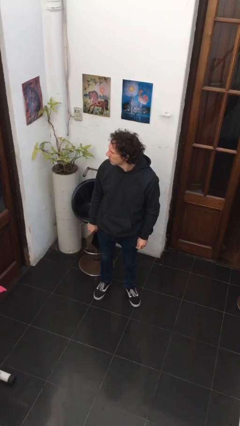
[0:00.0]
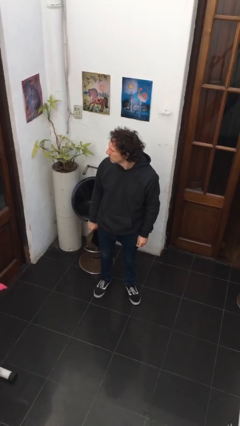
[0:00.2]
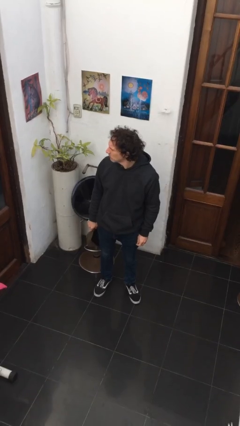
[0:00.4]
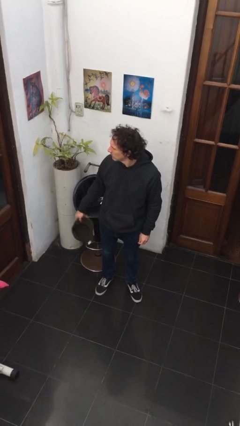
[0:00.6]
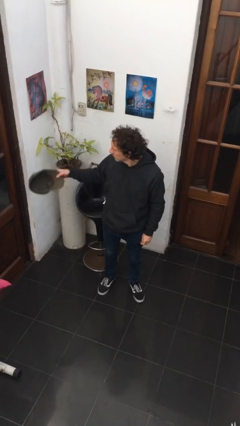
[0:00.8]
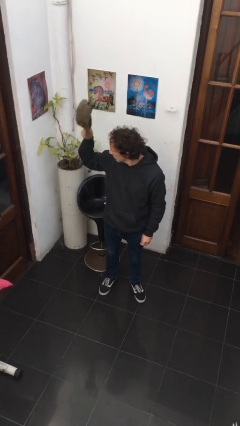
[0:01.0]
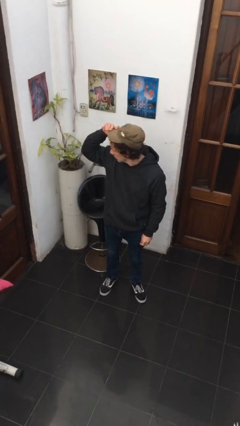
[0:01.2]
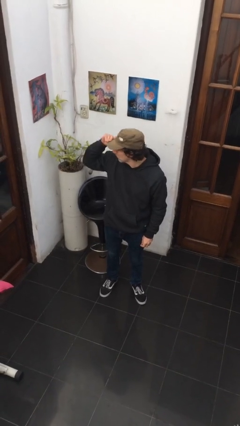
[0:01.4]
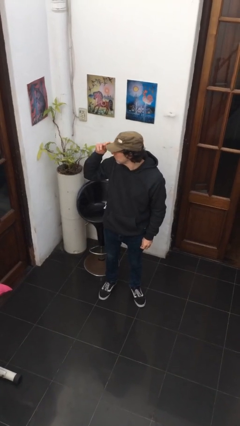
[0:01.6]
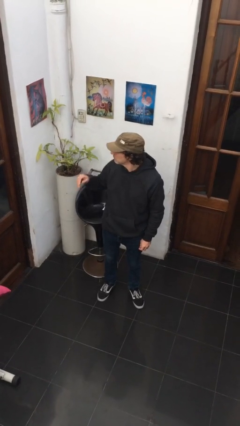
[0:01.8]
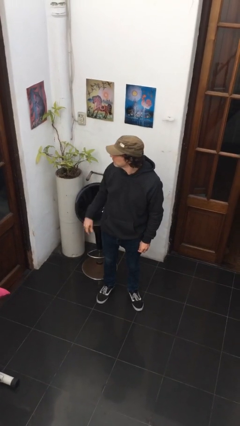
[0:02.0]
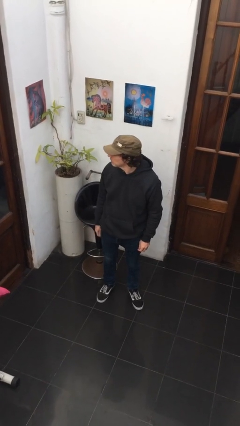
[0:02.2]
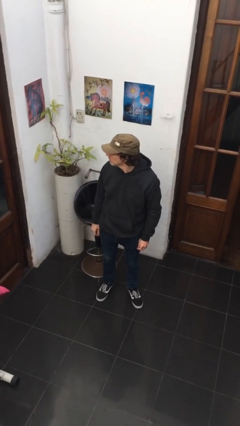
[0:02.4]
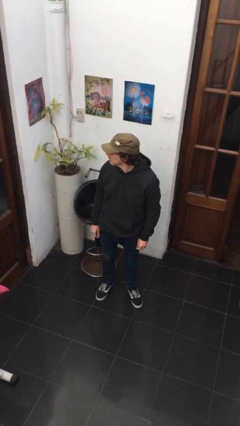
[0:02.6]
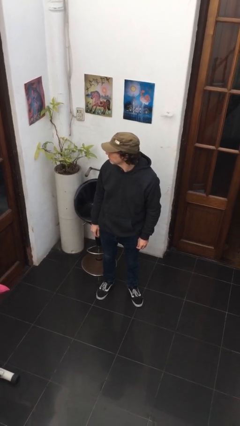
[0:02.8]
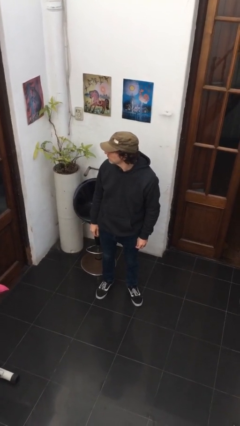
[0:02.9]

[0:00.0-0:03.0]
person puts on hat

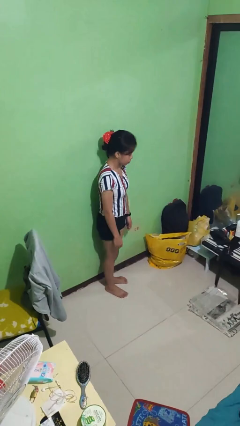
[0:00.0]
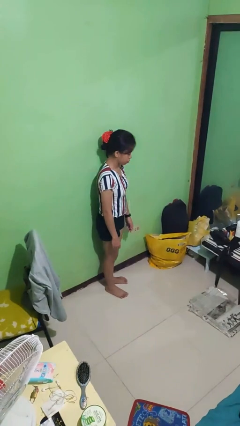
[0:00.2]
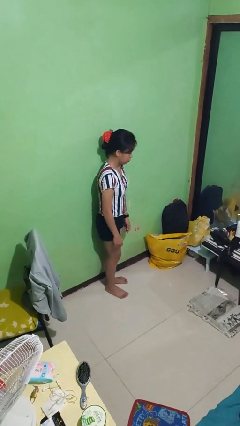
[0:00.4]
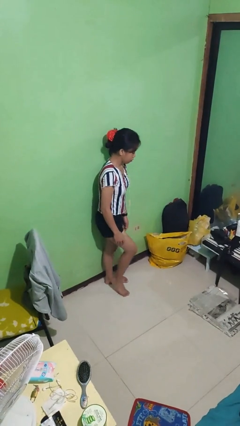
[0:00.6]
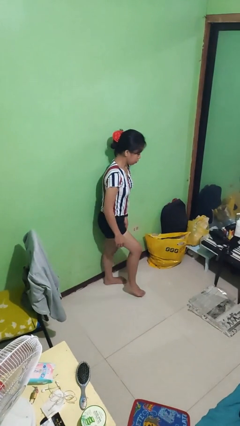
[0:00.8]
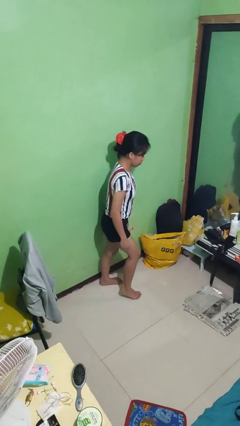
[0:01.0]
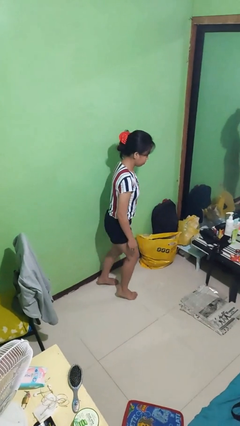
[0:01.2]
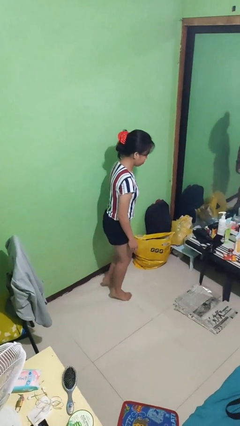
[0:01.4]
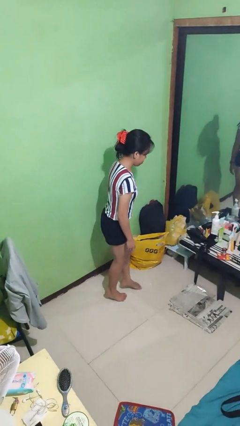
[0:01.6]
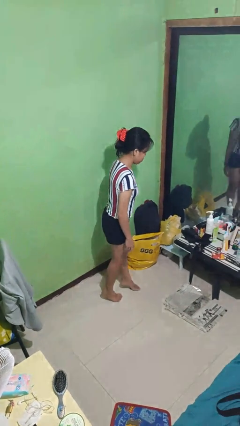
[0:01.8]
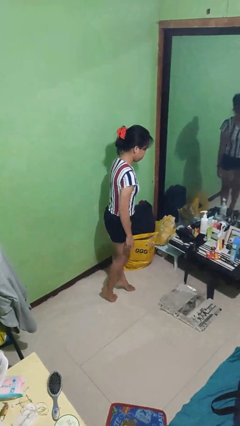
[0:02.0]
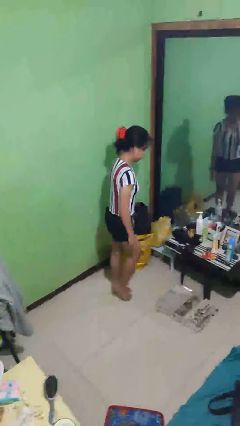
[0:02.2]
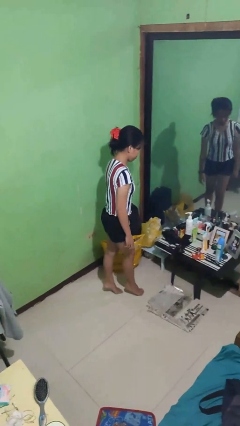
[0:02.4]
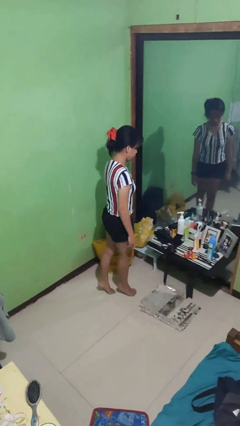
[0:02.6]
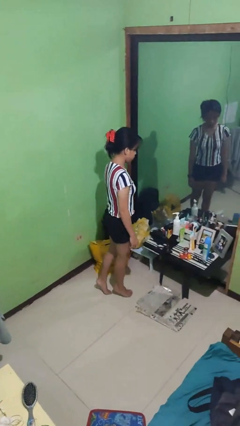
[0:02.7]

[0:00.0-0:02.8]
person walks tiptoe

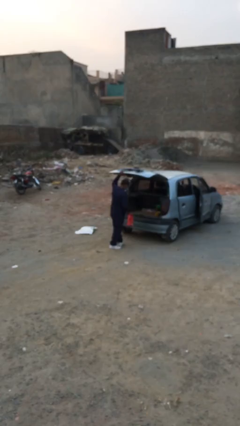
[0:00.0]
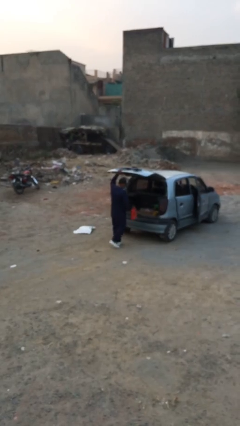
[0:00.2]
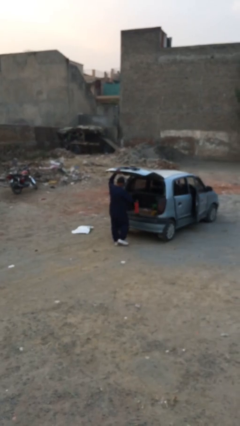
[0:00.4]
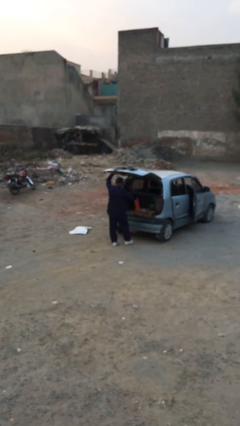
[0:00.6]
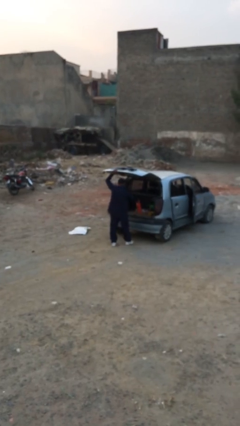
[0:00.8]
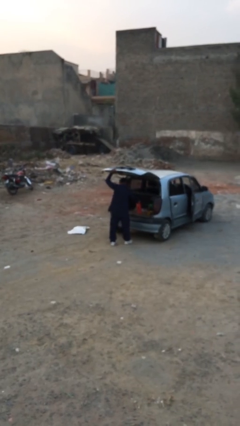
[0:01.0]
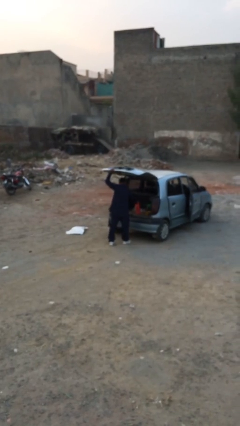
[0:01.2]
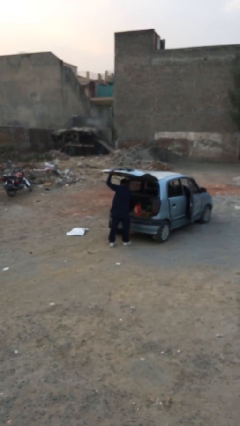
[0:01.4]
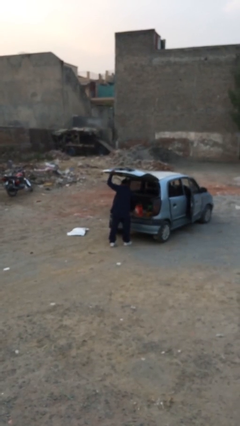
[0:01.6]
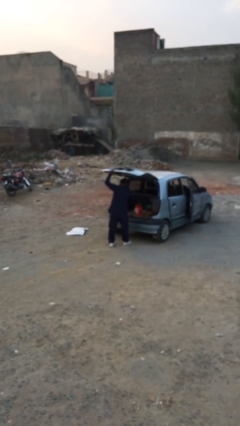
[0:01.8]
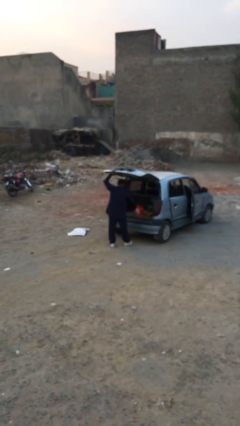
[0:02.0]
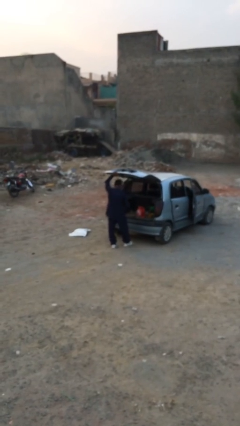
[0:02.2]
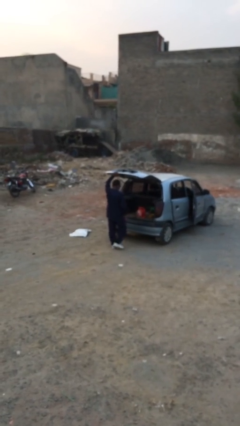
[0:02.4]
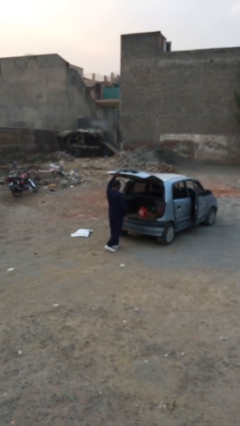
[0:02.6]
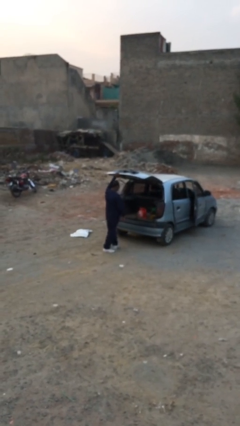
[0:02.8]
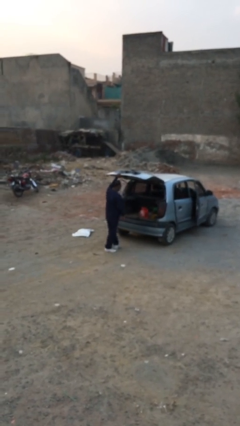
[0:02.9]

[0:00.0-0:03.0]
person loads car

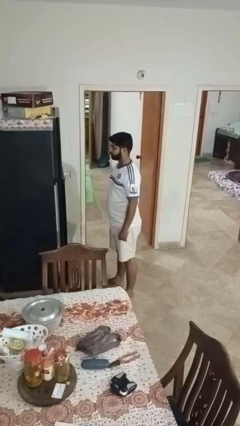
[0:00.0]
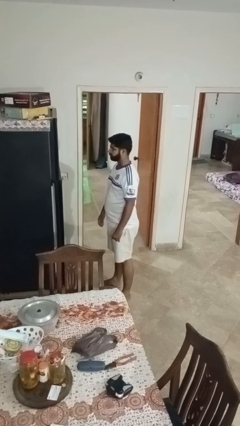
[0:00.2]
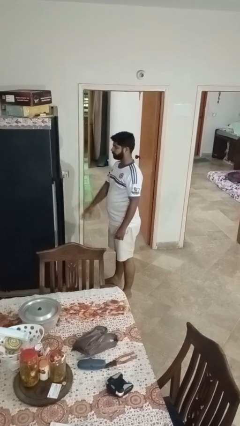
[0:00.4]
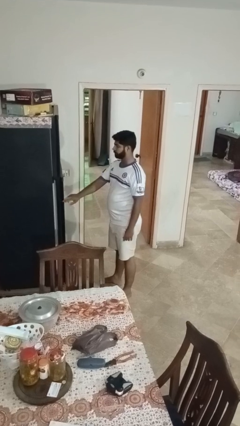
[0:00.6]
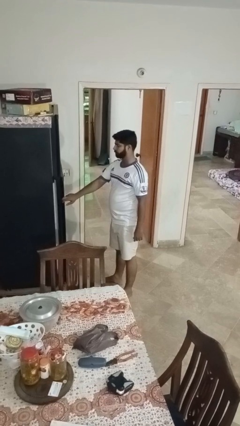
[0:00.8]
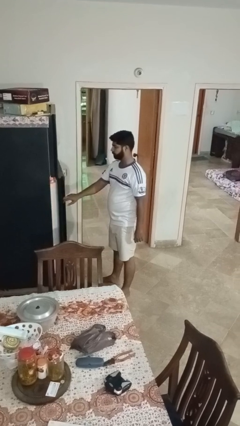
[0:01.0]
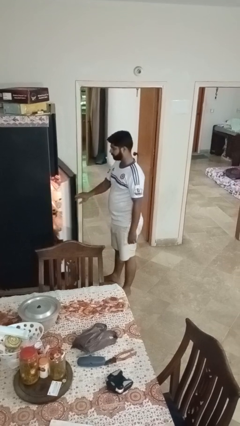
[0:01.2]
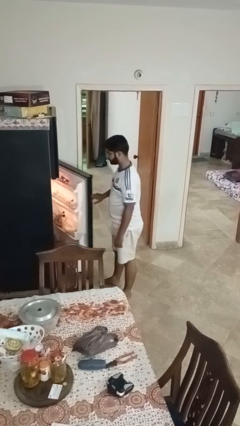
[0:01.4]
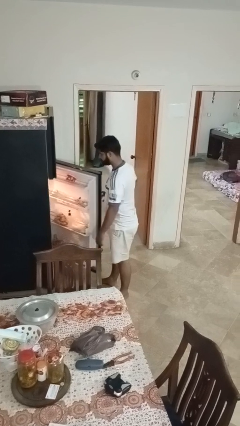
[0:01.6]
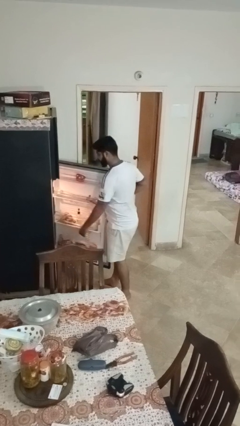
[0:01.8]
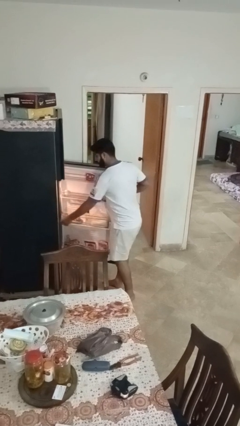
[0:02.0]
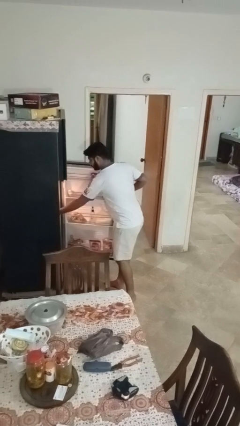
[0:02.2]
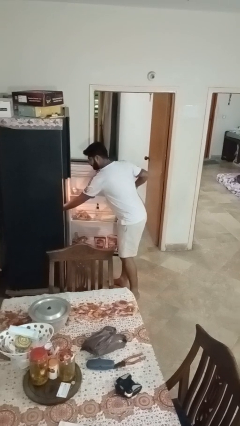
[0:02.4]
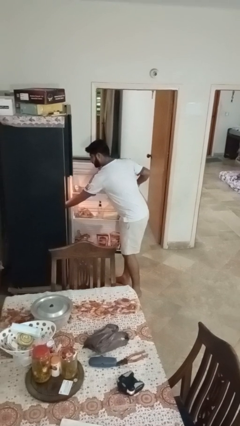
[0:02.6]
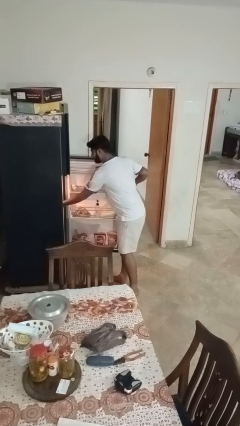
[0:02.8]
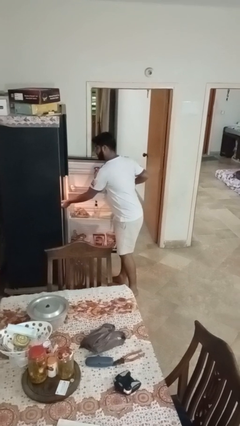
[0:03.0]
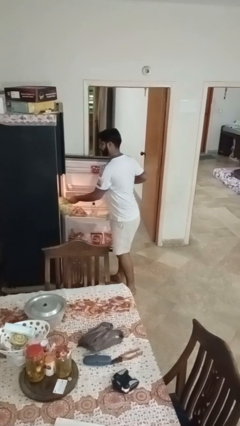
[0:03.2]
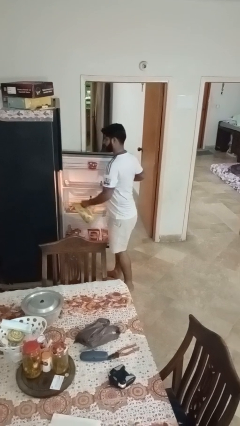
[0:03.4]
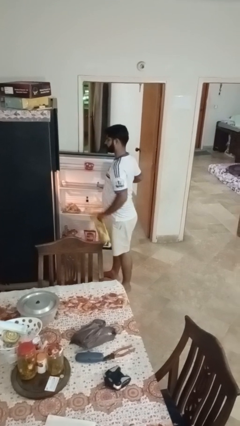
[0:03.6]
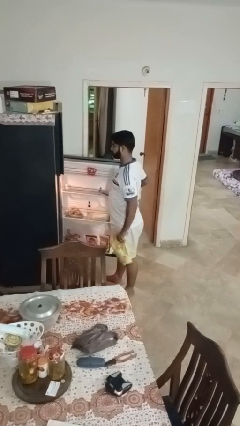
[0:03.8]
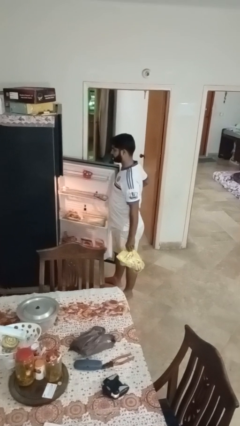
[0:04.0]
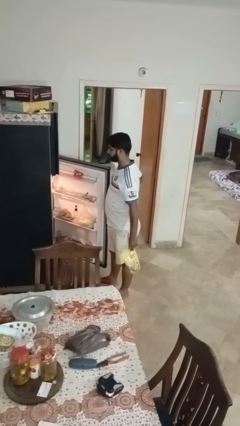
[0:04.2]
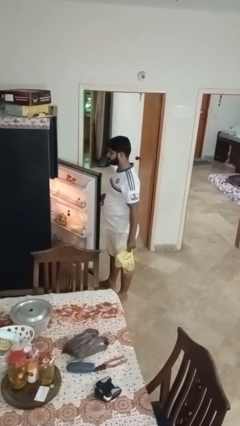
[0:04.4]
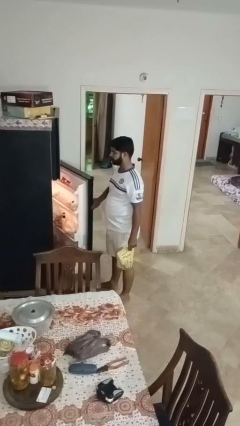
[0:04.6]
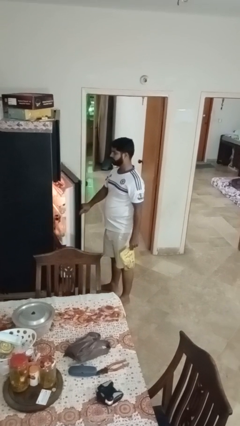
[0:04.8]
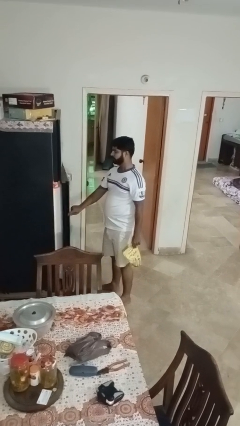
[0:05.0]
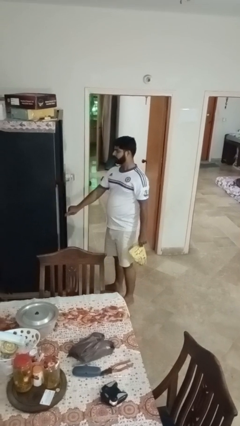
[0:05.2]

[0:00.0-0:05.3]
person takes object from refrigerator

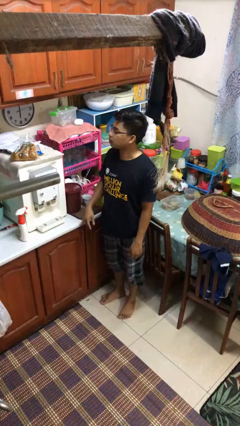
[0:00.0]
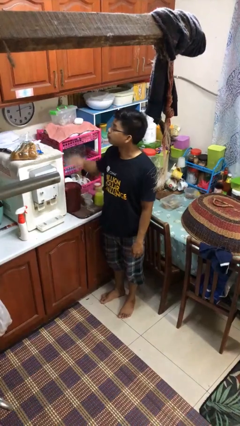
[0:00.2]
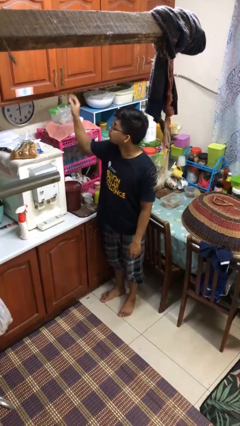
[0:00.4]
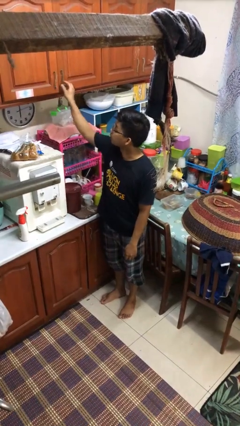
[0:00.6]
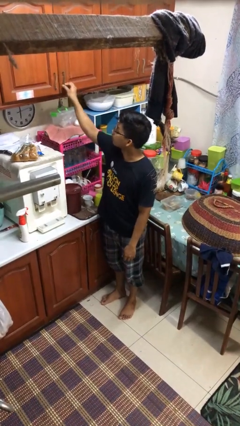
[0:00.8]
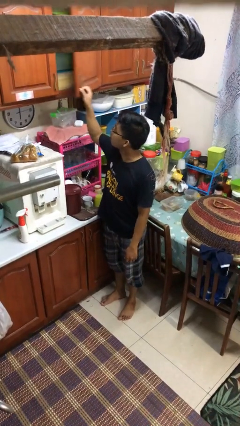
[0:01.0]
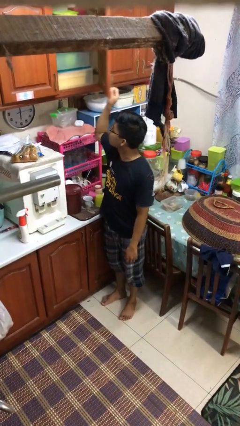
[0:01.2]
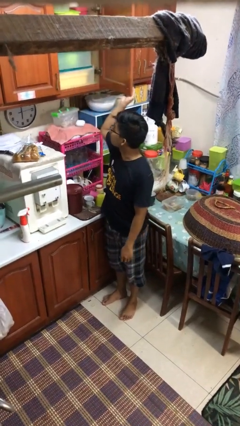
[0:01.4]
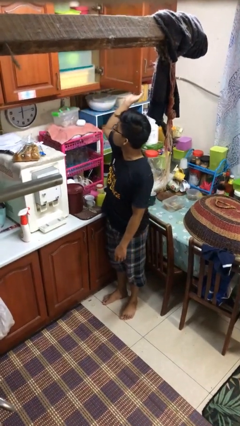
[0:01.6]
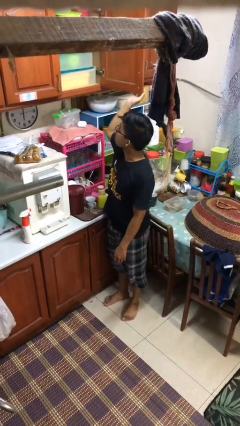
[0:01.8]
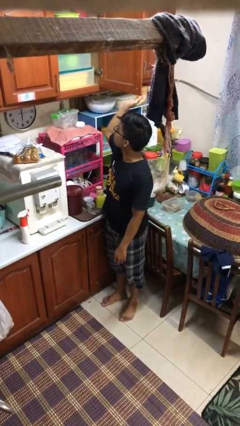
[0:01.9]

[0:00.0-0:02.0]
person opens kitchen drawer

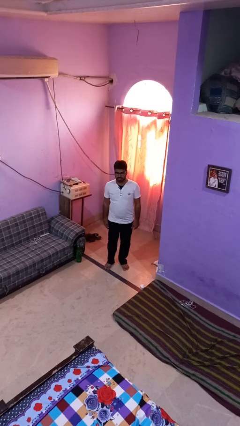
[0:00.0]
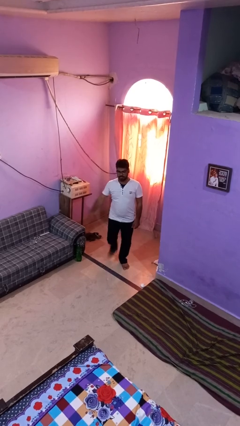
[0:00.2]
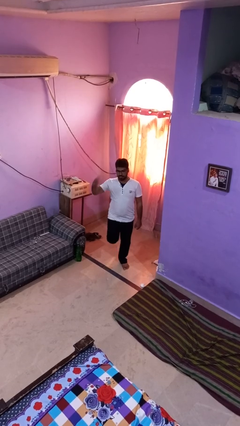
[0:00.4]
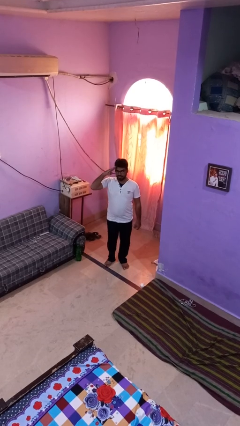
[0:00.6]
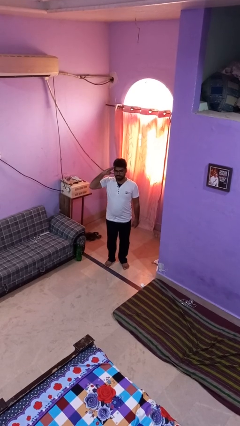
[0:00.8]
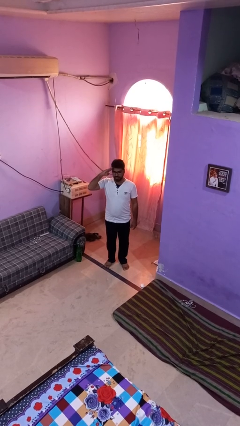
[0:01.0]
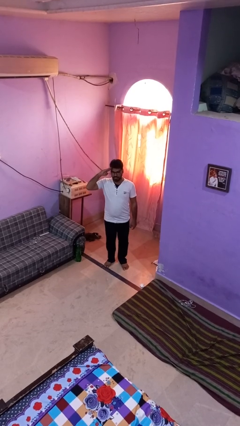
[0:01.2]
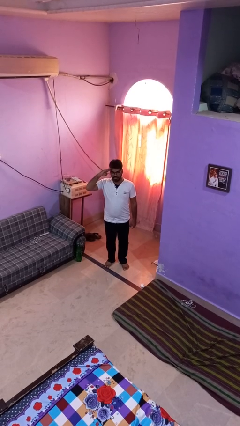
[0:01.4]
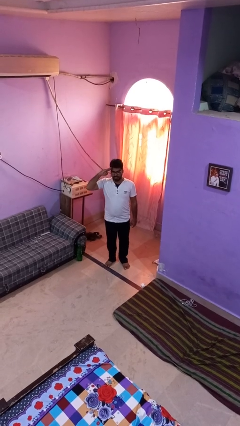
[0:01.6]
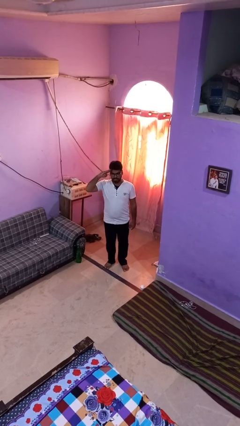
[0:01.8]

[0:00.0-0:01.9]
person salutes
